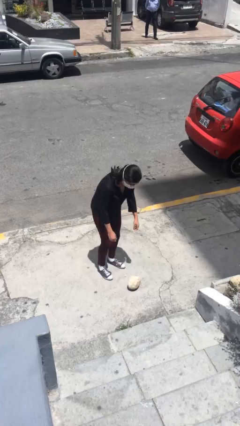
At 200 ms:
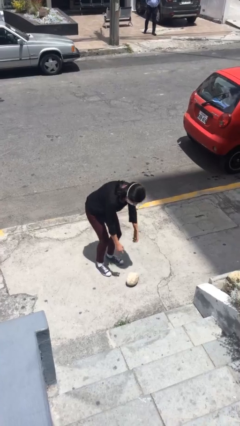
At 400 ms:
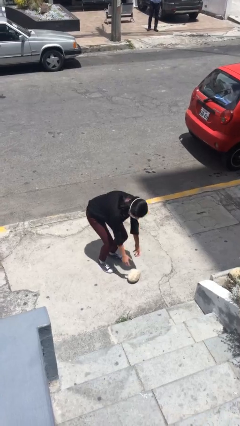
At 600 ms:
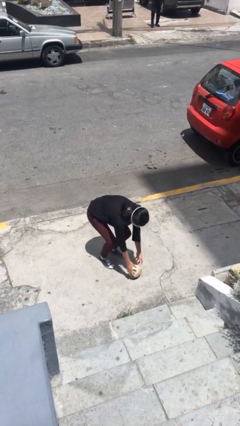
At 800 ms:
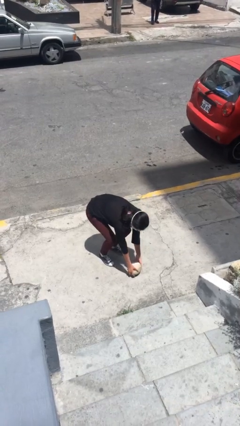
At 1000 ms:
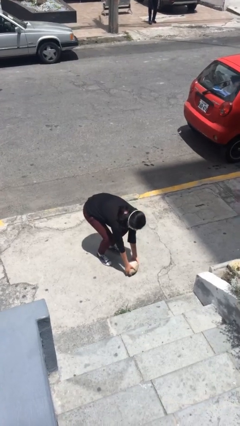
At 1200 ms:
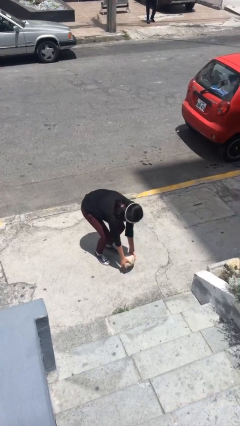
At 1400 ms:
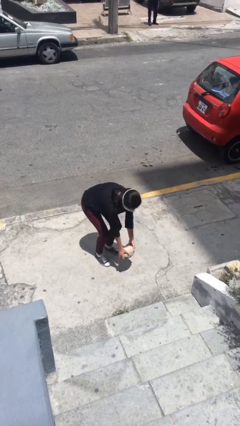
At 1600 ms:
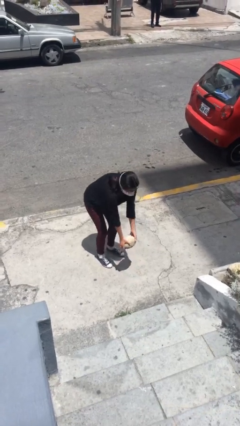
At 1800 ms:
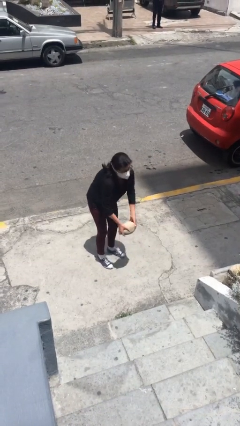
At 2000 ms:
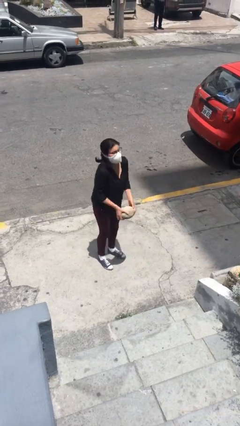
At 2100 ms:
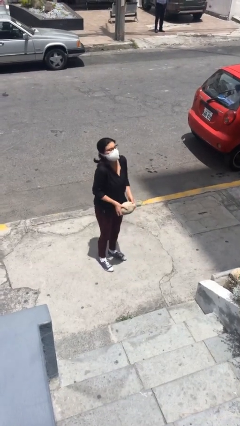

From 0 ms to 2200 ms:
person picks up object from floor

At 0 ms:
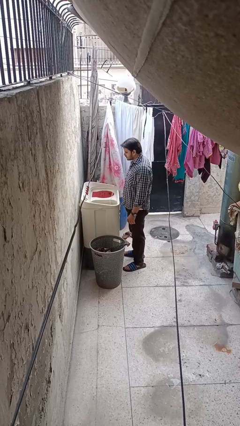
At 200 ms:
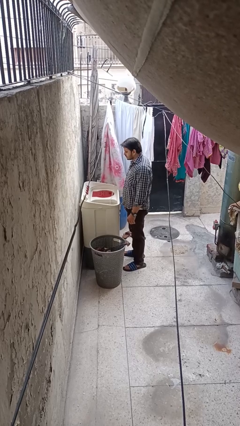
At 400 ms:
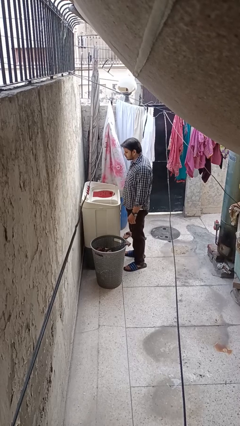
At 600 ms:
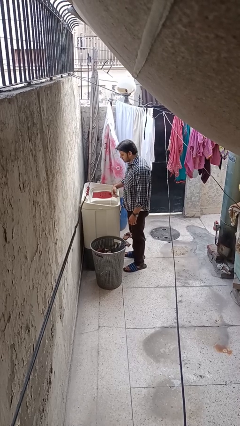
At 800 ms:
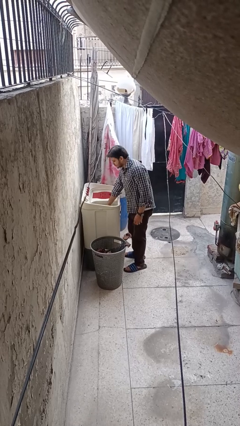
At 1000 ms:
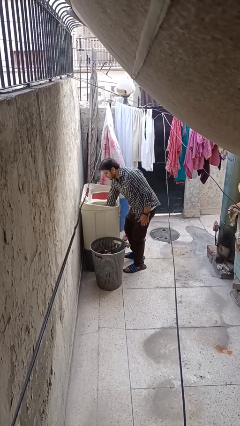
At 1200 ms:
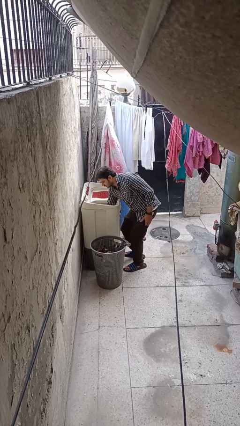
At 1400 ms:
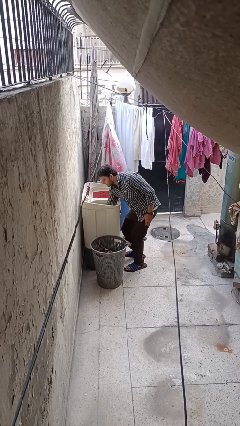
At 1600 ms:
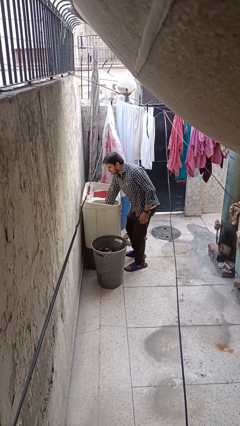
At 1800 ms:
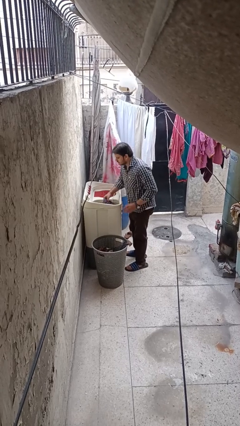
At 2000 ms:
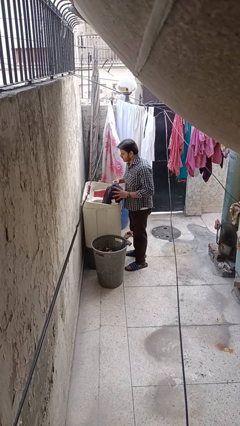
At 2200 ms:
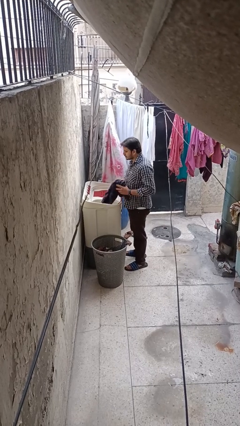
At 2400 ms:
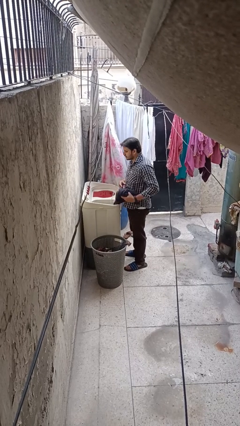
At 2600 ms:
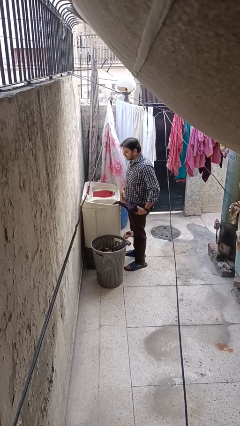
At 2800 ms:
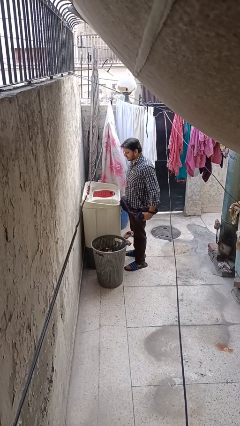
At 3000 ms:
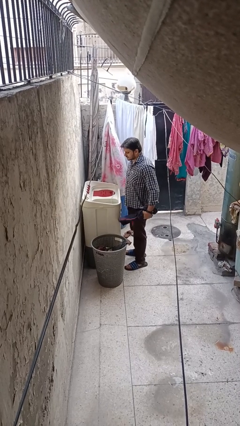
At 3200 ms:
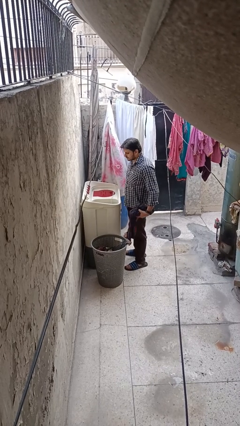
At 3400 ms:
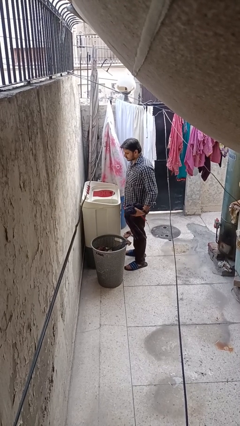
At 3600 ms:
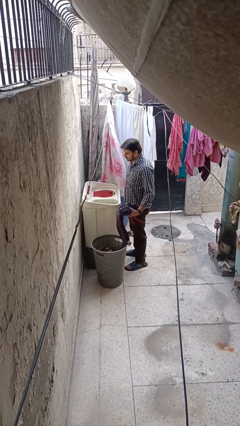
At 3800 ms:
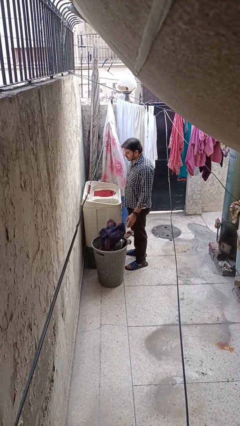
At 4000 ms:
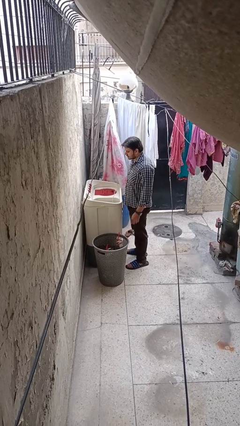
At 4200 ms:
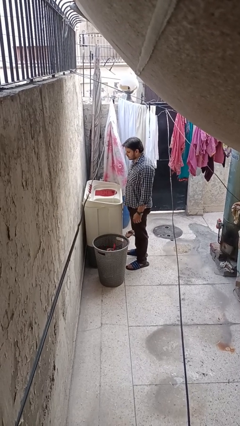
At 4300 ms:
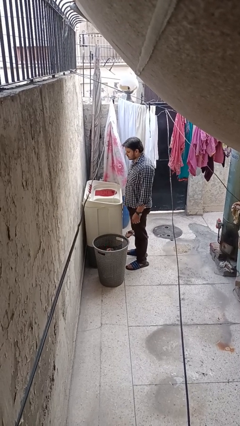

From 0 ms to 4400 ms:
person loads clotheswasher

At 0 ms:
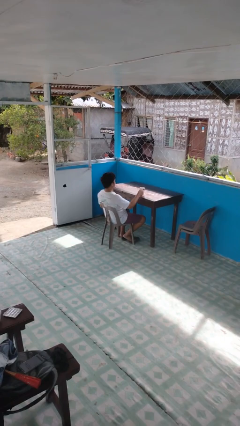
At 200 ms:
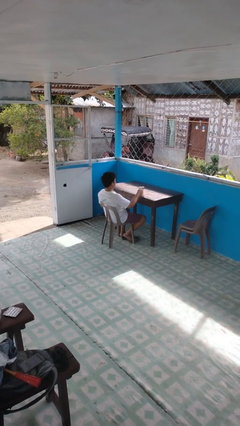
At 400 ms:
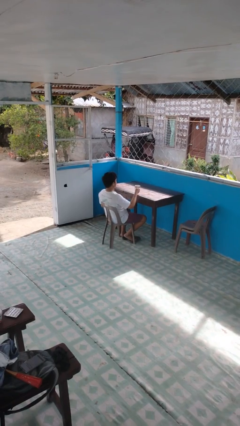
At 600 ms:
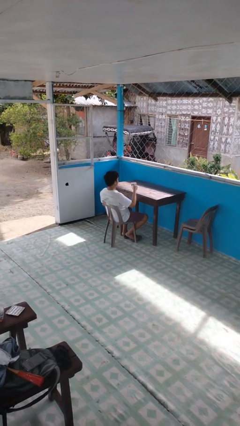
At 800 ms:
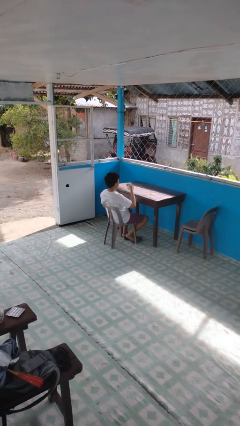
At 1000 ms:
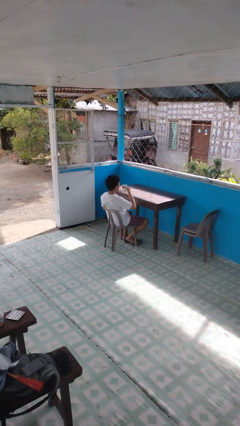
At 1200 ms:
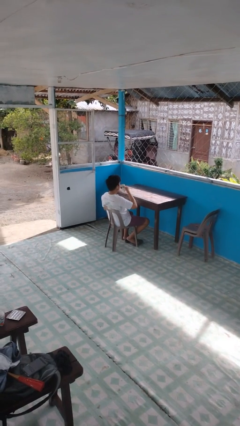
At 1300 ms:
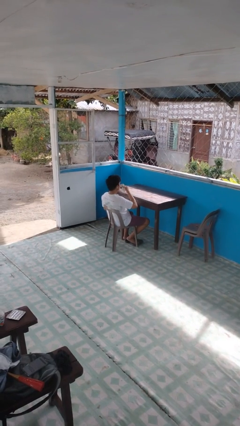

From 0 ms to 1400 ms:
person picks up object from table

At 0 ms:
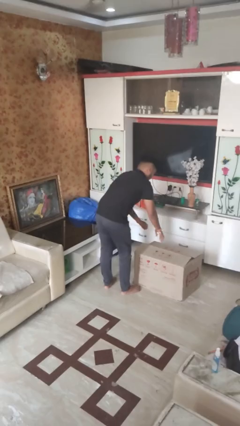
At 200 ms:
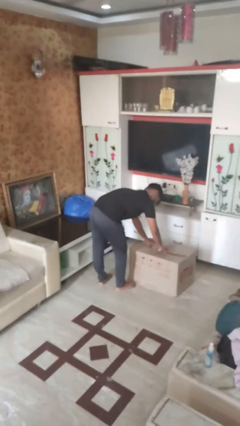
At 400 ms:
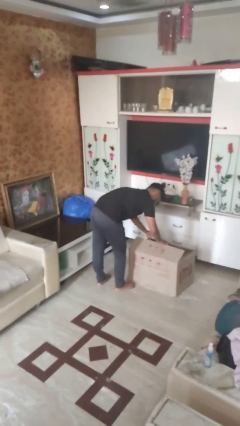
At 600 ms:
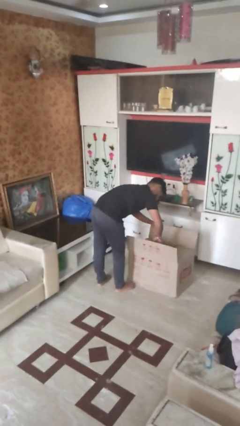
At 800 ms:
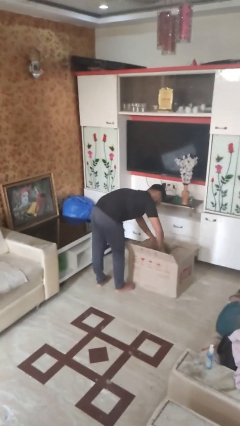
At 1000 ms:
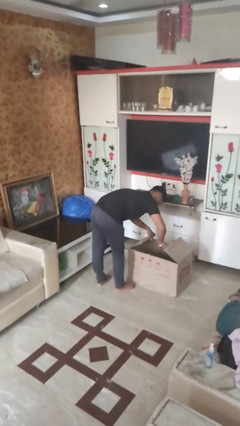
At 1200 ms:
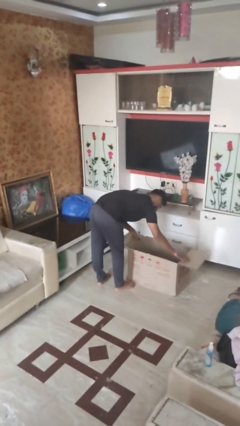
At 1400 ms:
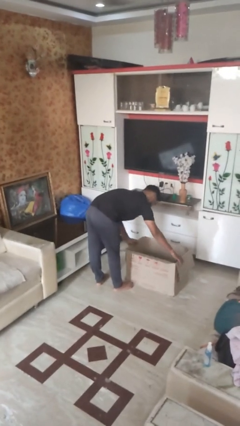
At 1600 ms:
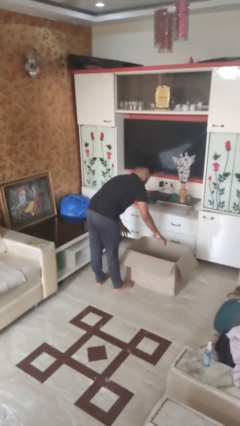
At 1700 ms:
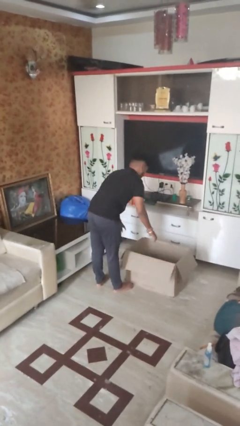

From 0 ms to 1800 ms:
person opens box

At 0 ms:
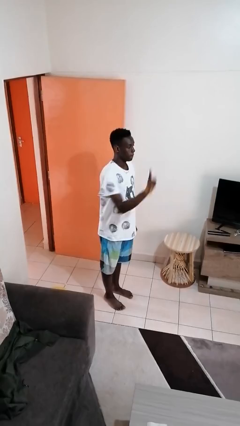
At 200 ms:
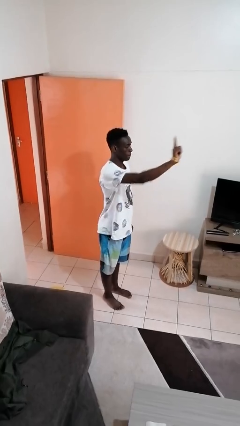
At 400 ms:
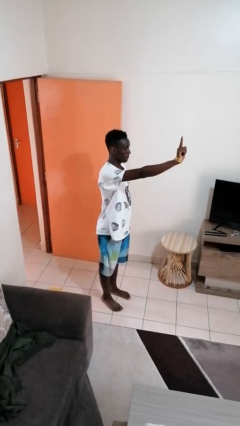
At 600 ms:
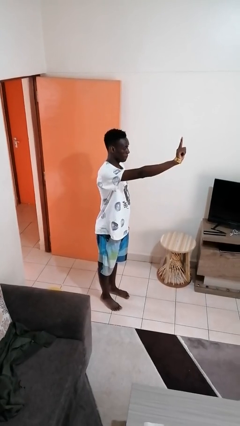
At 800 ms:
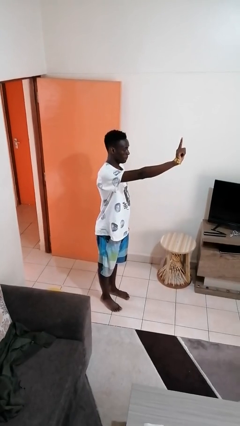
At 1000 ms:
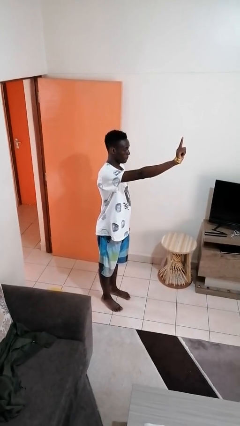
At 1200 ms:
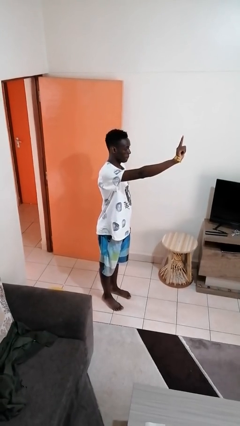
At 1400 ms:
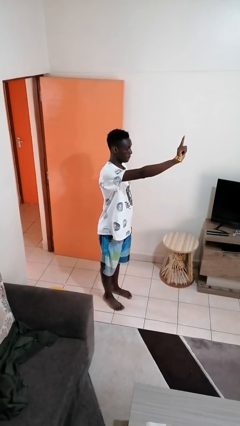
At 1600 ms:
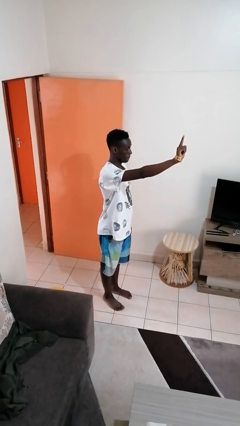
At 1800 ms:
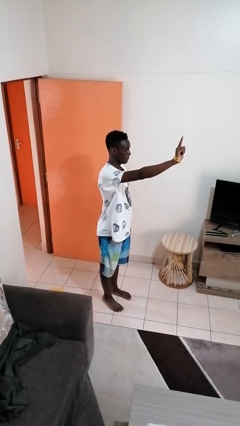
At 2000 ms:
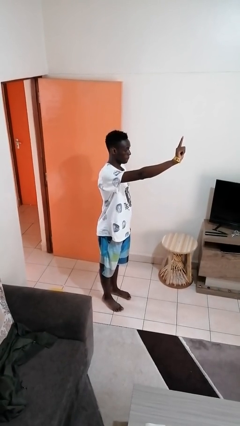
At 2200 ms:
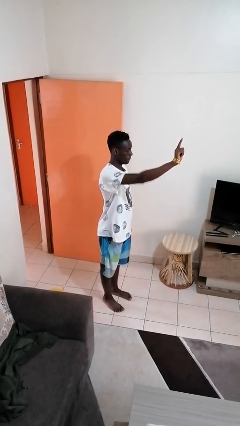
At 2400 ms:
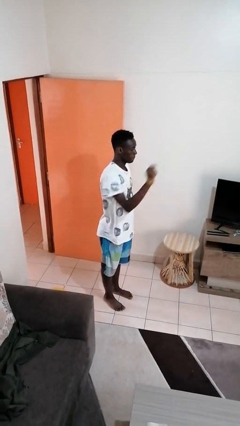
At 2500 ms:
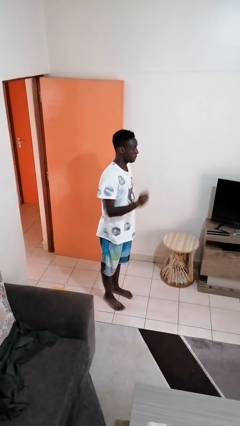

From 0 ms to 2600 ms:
person gestures number one

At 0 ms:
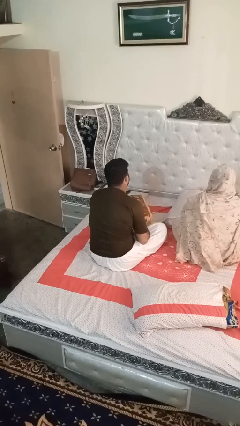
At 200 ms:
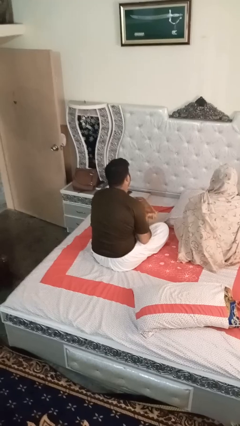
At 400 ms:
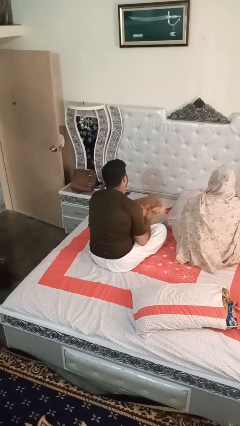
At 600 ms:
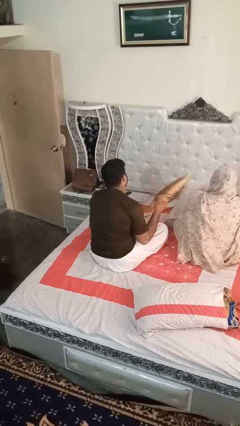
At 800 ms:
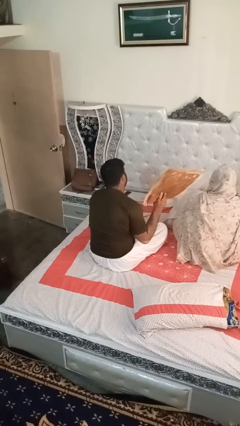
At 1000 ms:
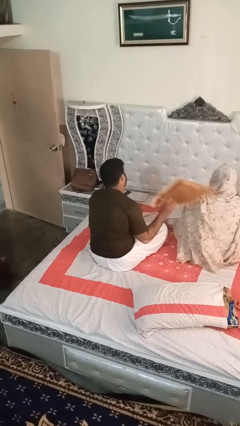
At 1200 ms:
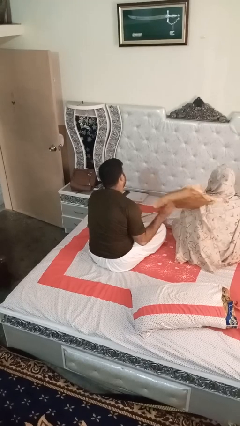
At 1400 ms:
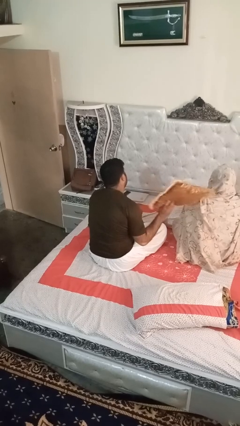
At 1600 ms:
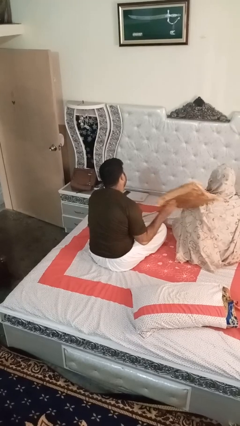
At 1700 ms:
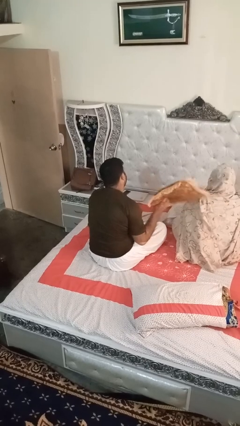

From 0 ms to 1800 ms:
person hits person with pillow

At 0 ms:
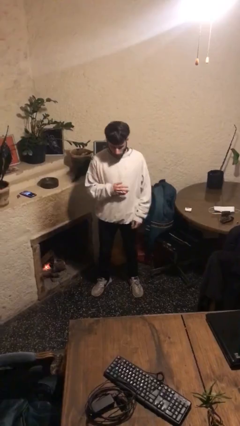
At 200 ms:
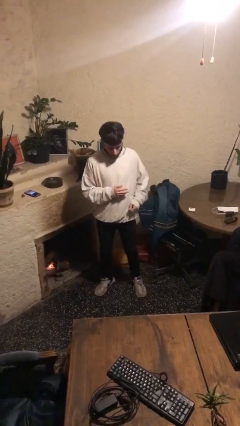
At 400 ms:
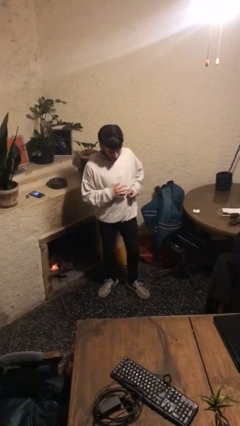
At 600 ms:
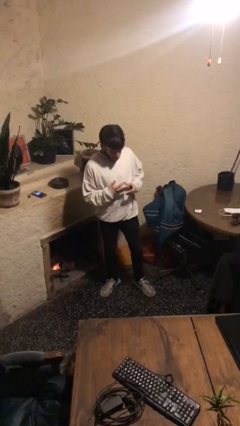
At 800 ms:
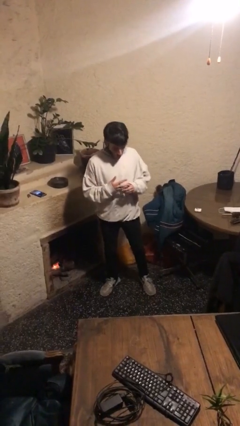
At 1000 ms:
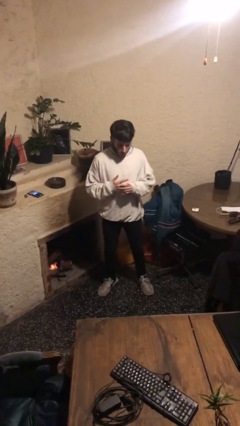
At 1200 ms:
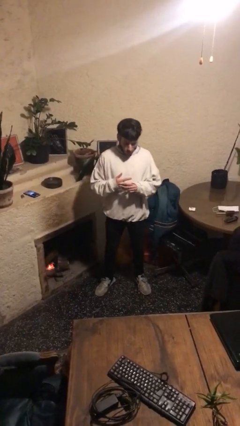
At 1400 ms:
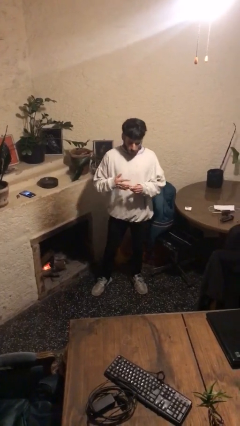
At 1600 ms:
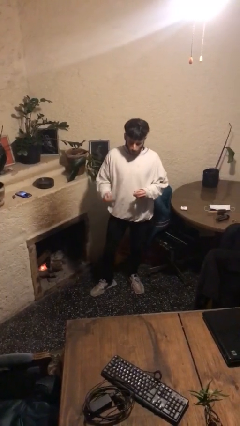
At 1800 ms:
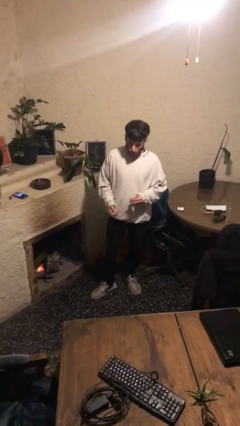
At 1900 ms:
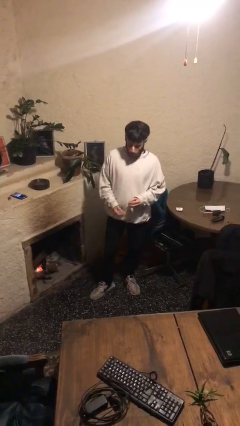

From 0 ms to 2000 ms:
person takes off ring

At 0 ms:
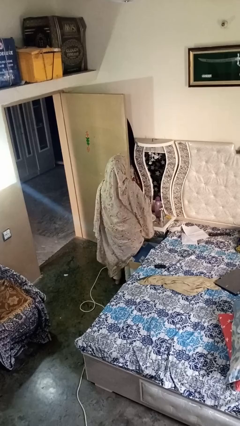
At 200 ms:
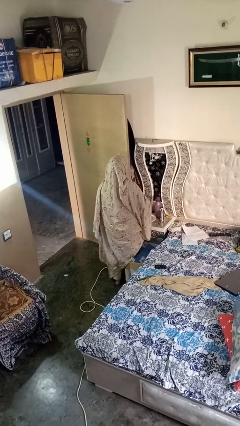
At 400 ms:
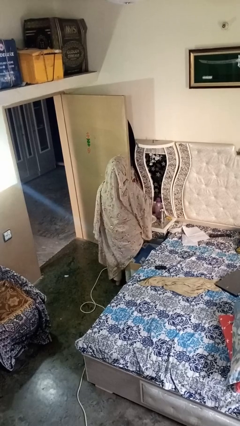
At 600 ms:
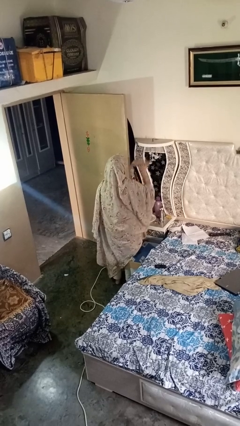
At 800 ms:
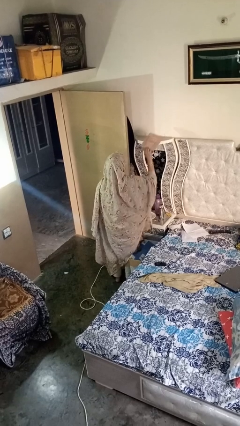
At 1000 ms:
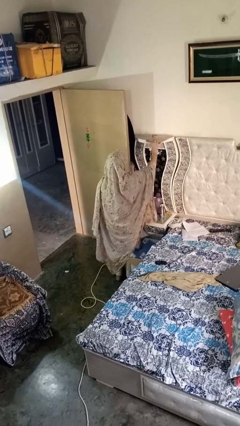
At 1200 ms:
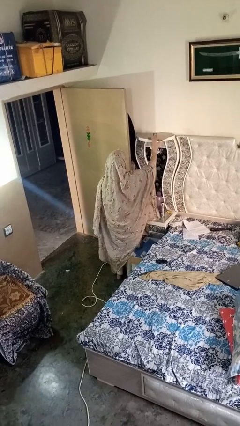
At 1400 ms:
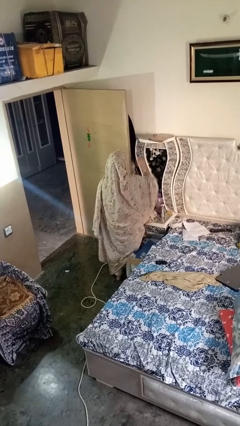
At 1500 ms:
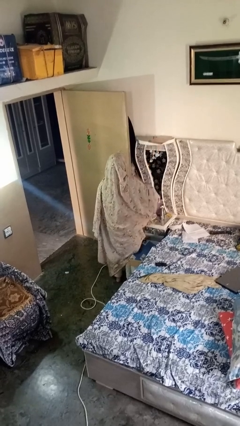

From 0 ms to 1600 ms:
person puts down object on shelf
